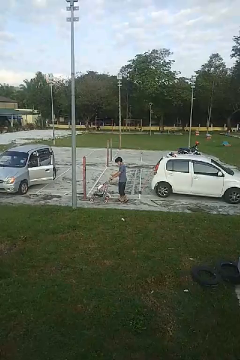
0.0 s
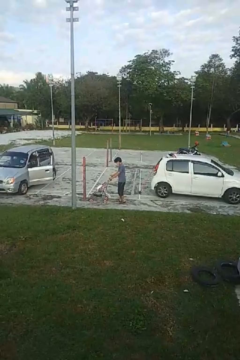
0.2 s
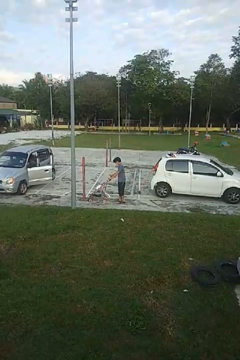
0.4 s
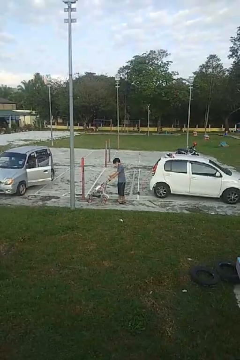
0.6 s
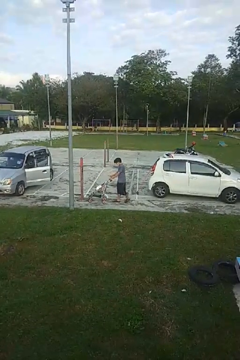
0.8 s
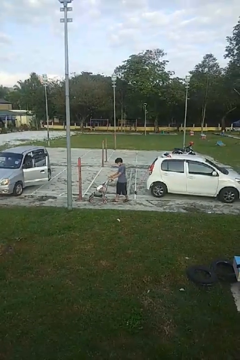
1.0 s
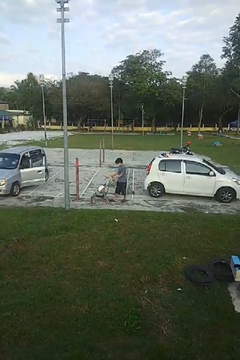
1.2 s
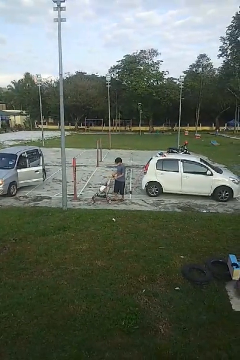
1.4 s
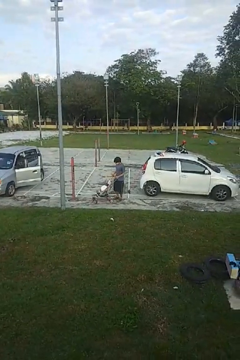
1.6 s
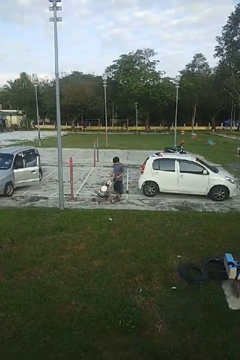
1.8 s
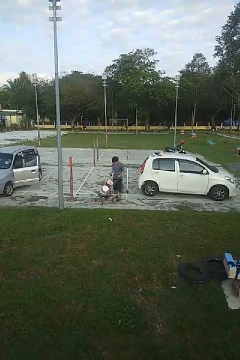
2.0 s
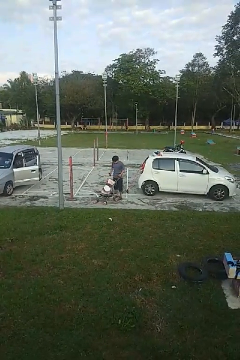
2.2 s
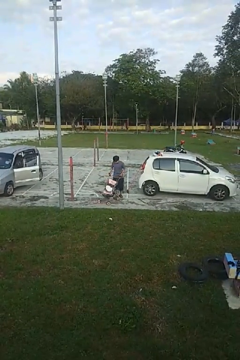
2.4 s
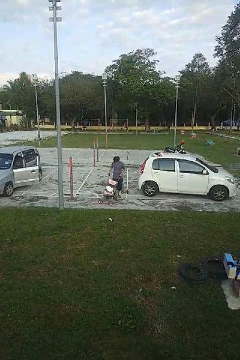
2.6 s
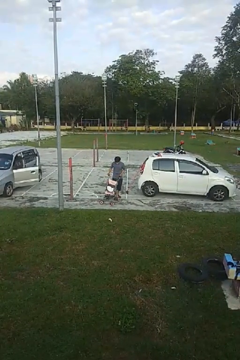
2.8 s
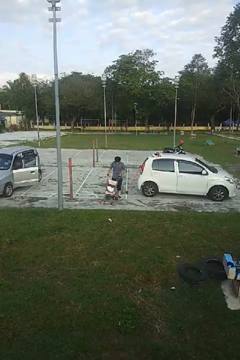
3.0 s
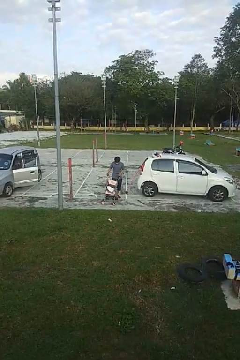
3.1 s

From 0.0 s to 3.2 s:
person pulls wheeled cart

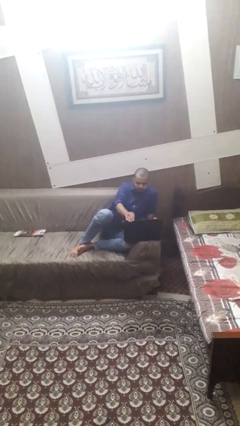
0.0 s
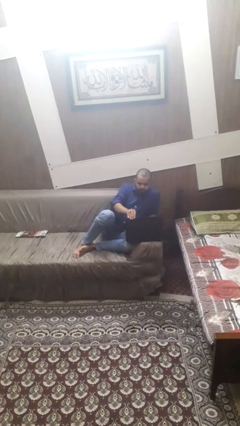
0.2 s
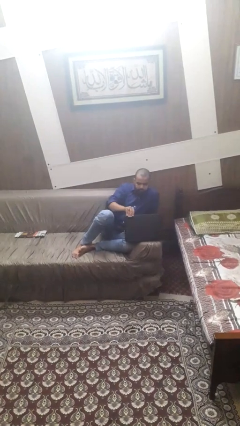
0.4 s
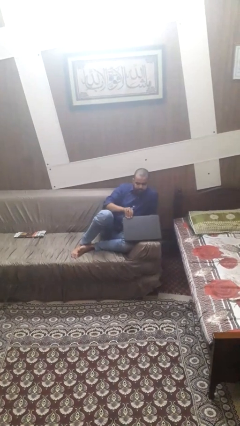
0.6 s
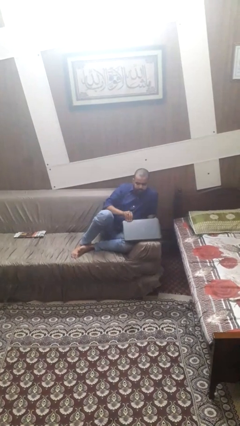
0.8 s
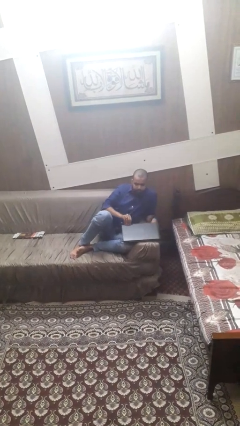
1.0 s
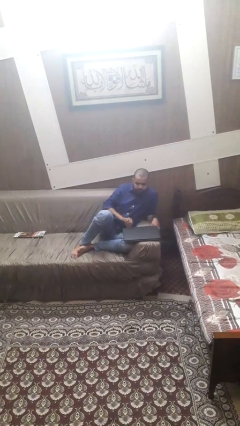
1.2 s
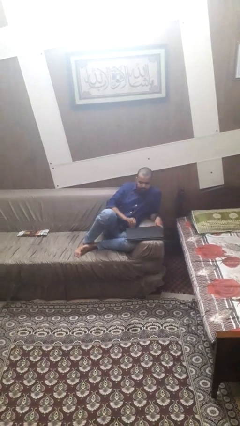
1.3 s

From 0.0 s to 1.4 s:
person closes laptop

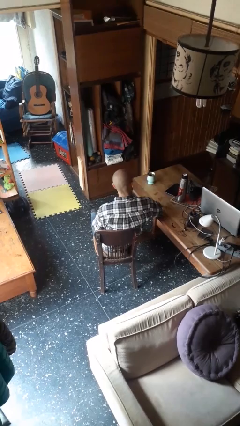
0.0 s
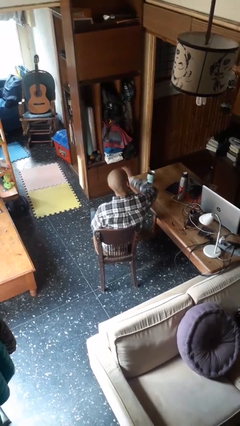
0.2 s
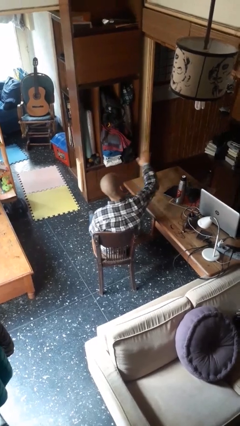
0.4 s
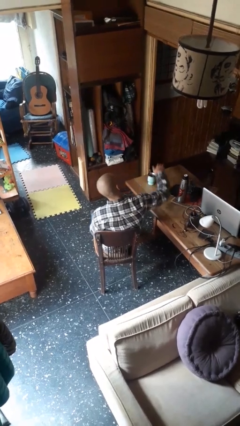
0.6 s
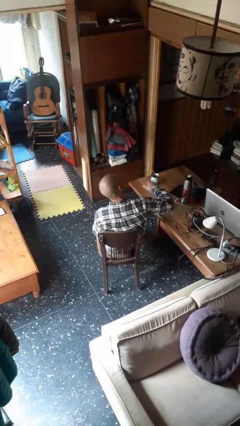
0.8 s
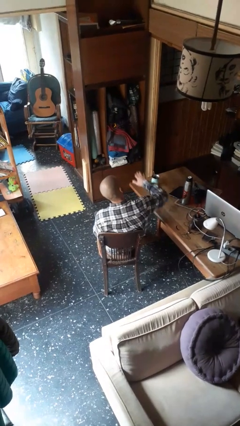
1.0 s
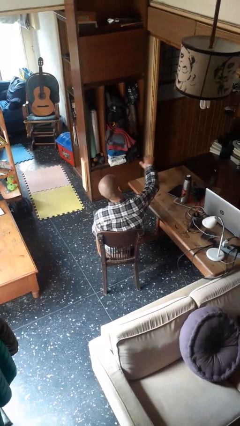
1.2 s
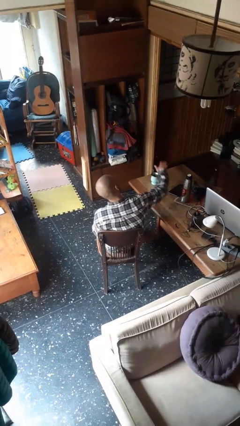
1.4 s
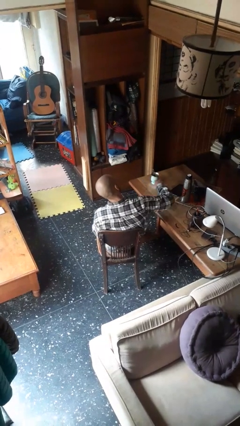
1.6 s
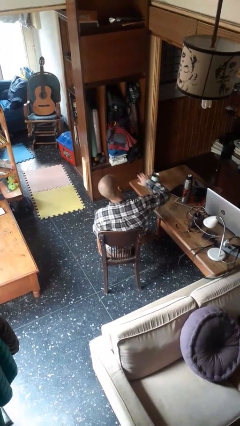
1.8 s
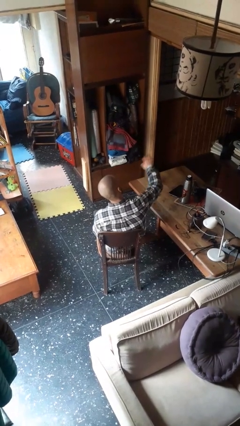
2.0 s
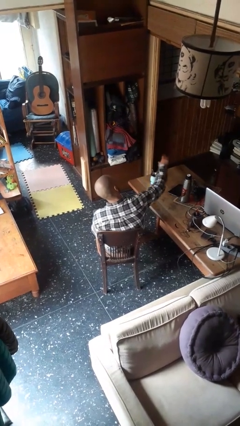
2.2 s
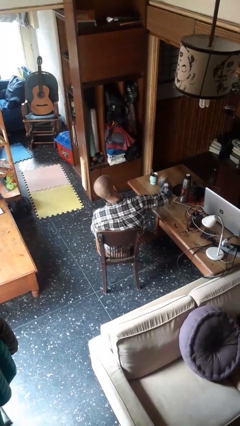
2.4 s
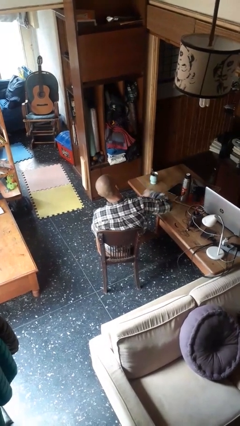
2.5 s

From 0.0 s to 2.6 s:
person waves hand over object

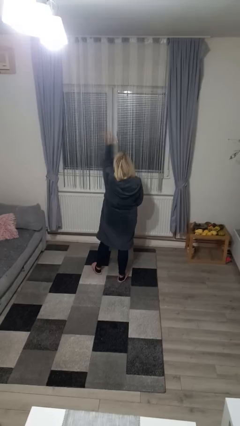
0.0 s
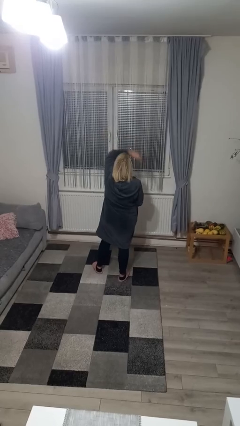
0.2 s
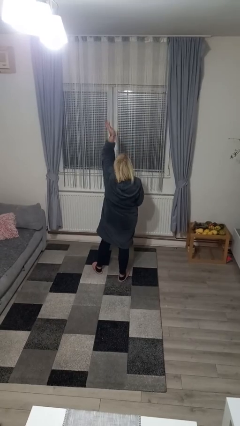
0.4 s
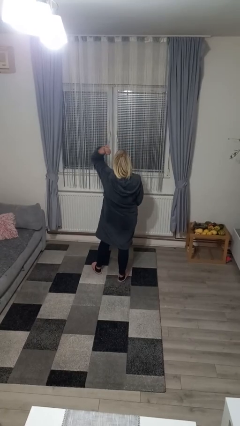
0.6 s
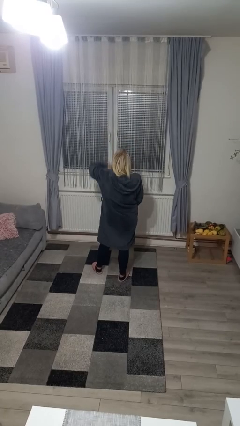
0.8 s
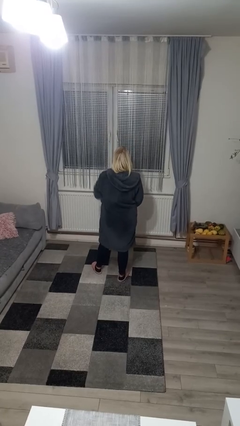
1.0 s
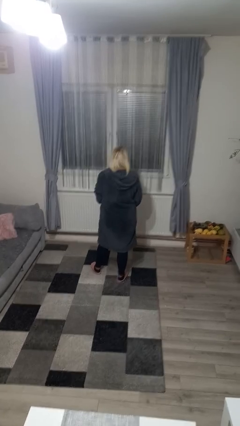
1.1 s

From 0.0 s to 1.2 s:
person swats bug

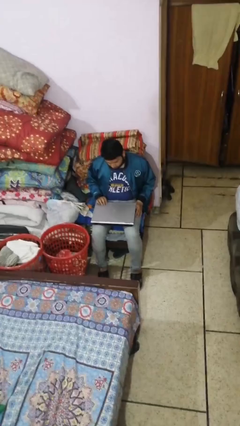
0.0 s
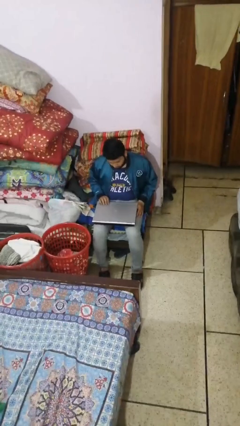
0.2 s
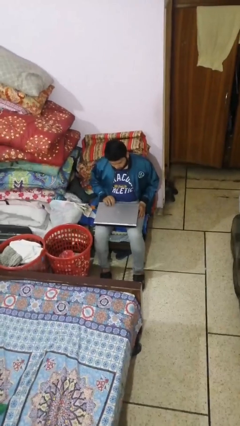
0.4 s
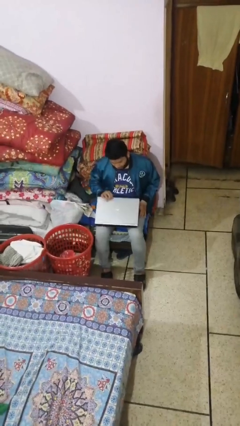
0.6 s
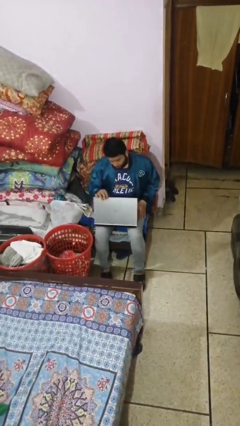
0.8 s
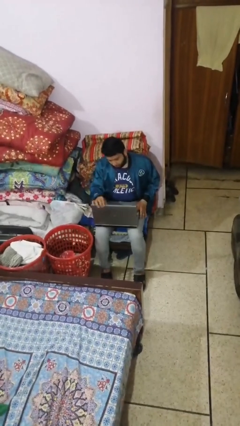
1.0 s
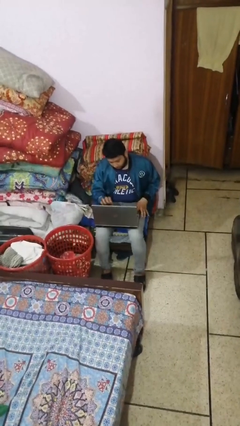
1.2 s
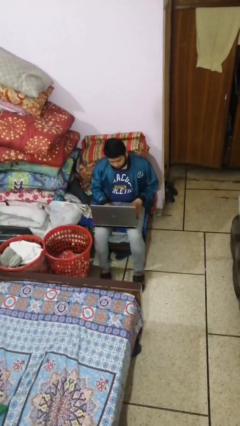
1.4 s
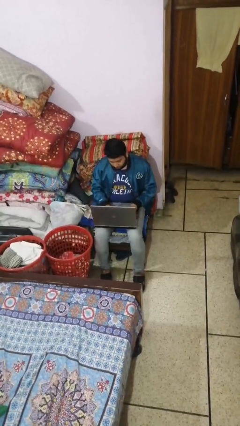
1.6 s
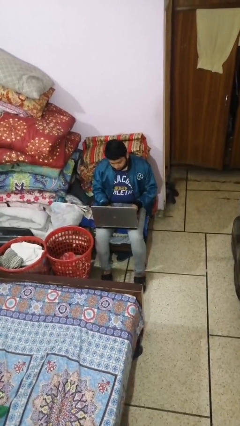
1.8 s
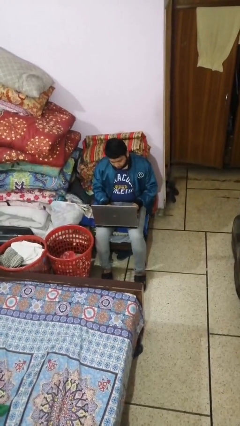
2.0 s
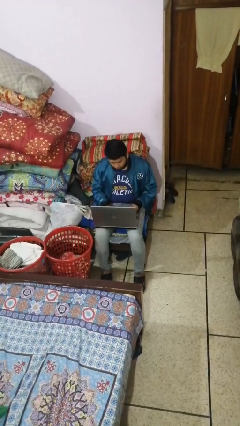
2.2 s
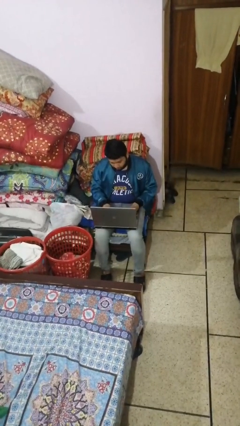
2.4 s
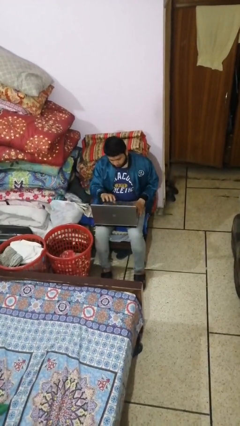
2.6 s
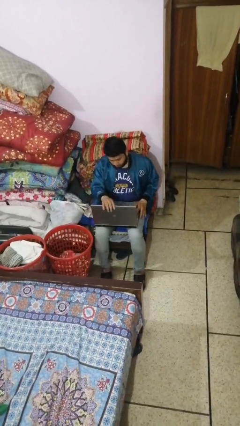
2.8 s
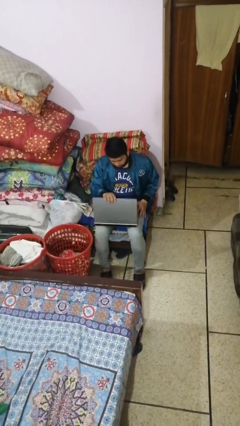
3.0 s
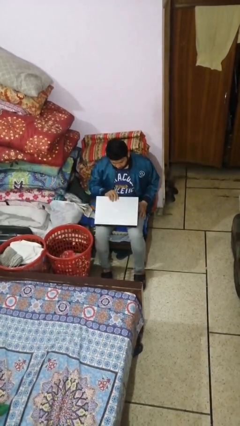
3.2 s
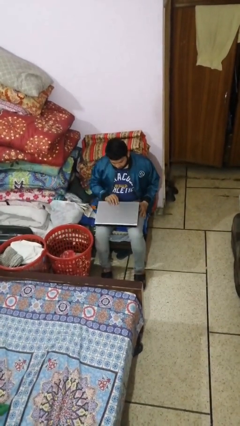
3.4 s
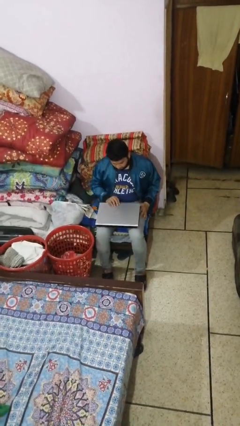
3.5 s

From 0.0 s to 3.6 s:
person interacts with laptop

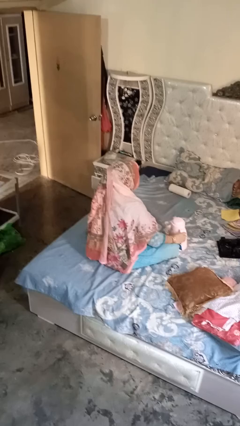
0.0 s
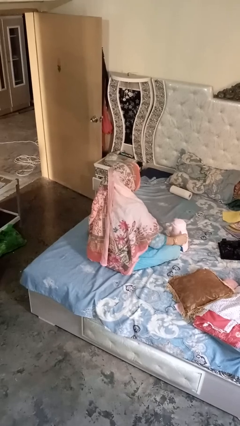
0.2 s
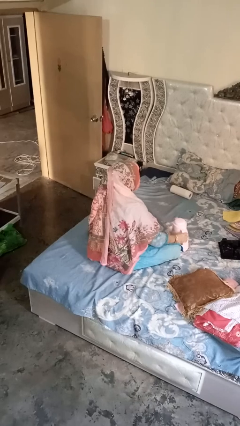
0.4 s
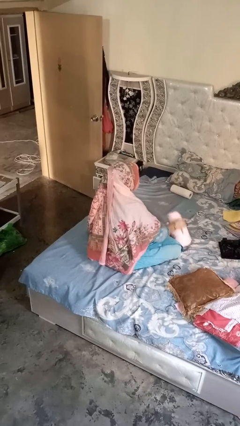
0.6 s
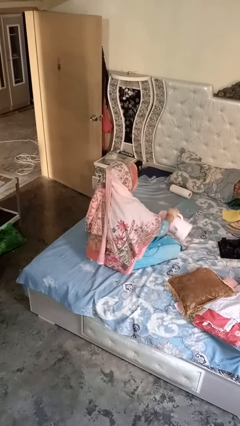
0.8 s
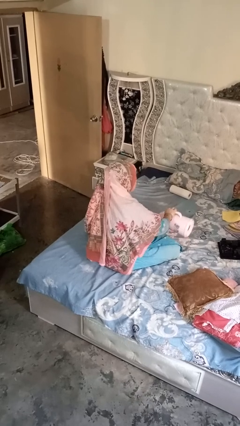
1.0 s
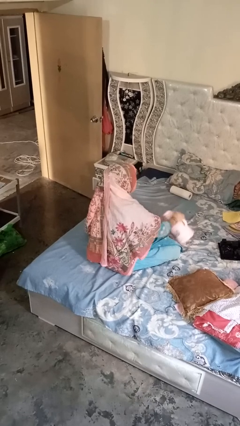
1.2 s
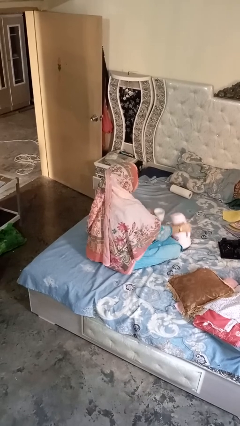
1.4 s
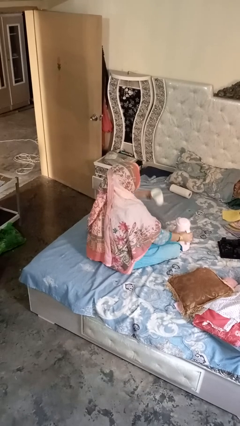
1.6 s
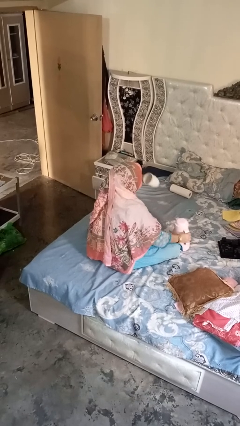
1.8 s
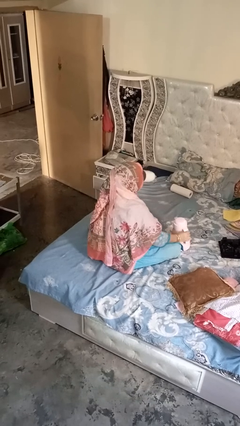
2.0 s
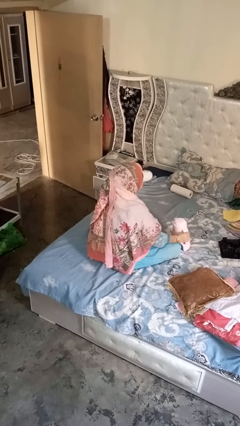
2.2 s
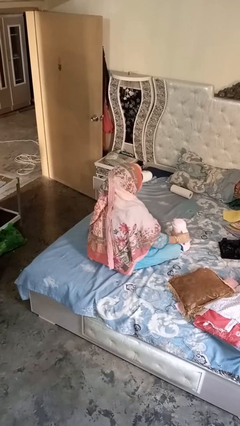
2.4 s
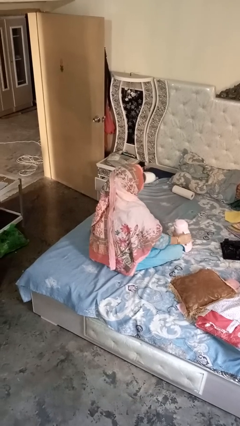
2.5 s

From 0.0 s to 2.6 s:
person pours coffee into mug

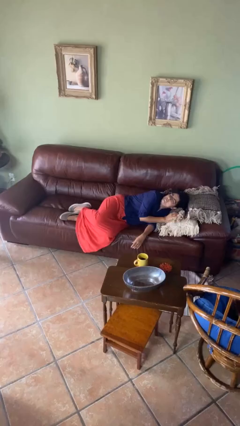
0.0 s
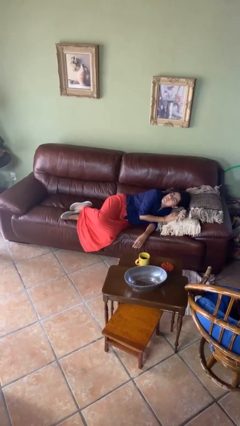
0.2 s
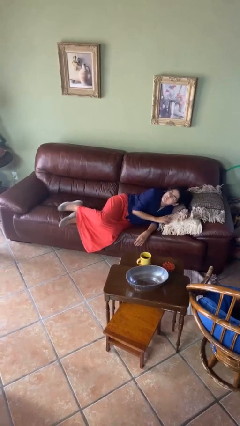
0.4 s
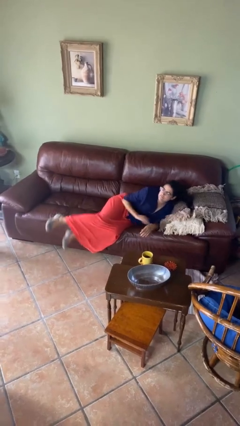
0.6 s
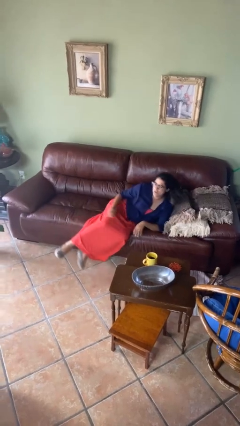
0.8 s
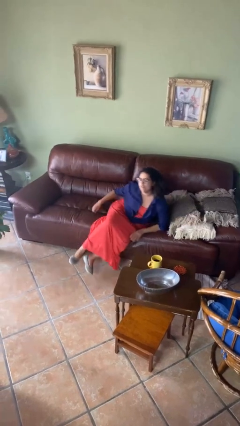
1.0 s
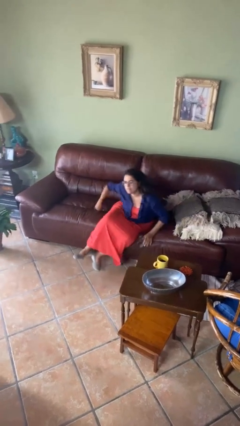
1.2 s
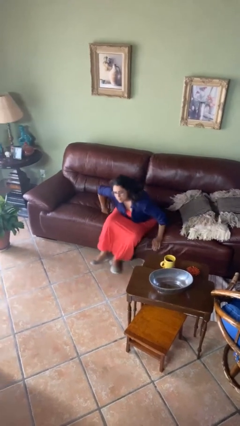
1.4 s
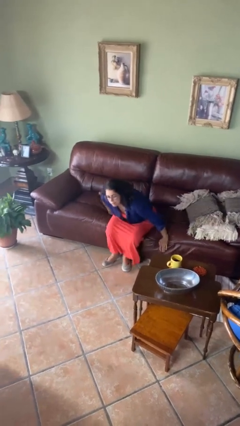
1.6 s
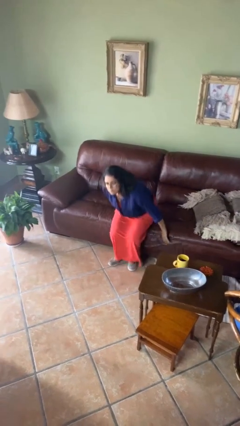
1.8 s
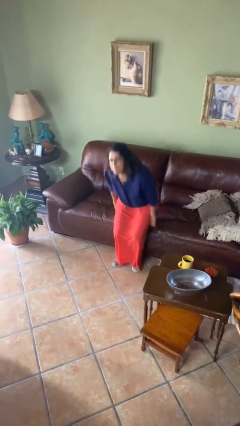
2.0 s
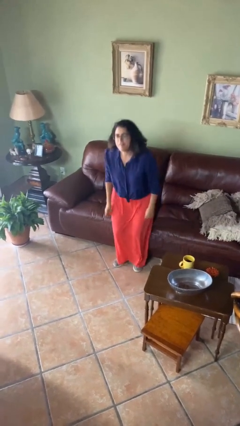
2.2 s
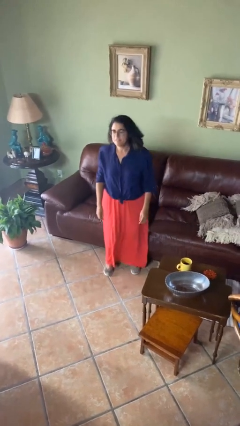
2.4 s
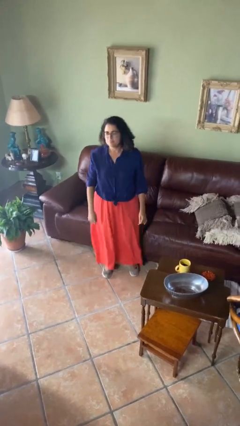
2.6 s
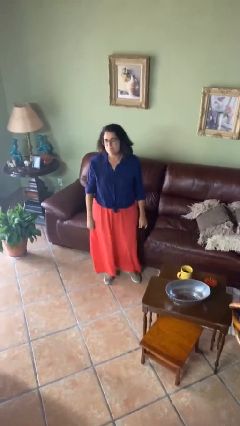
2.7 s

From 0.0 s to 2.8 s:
person stands up

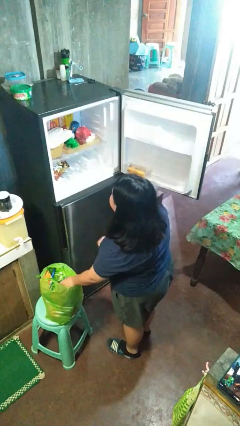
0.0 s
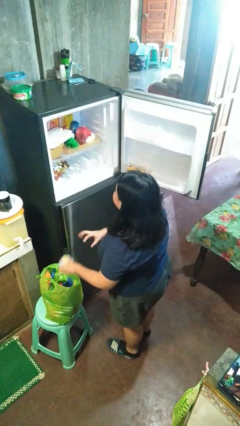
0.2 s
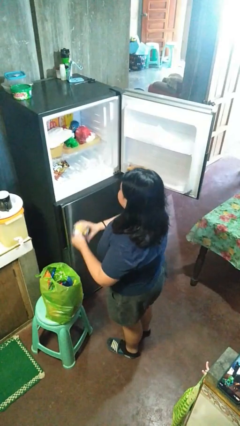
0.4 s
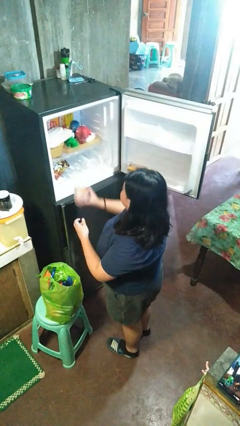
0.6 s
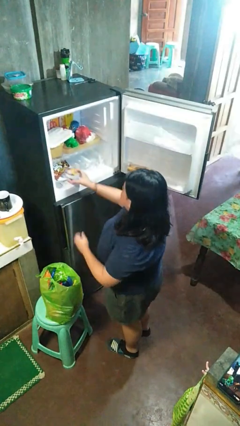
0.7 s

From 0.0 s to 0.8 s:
person loads groceries into refrigerator
